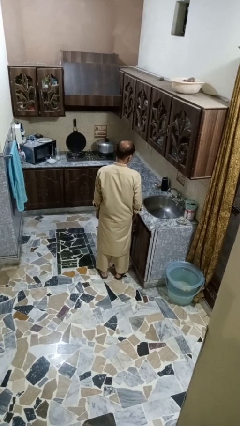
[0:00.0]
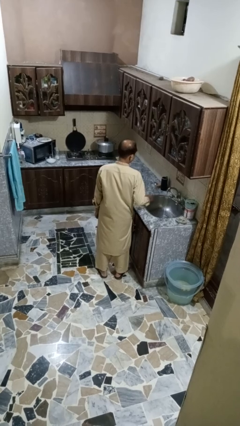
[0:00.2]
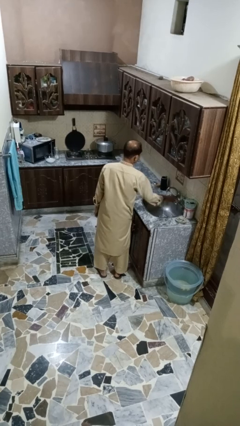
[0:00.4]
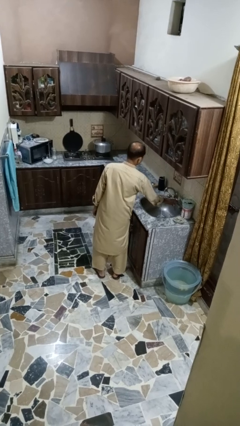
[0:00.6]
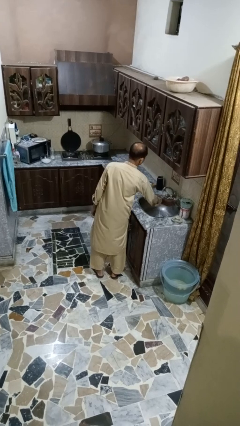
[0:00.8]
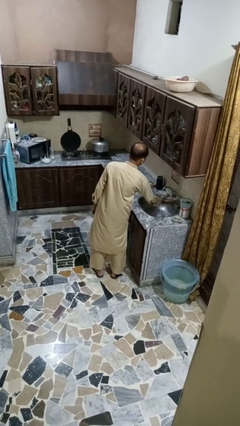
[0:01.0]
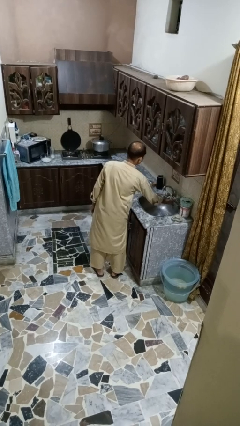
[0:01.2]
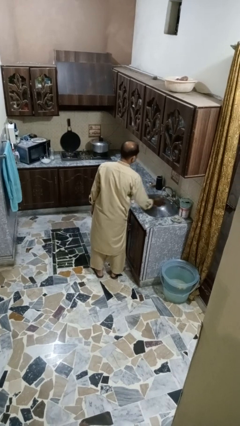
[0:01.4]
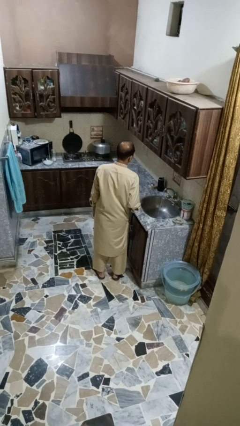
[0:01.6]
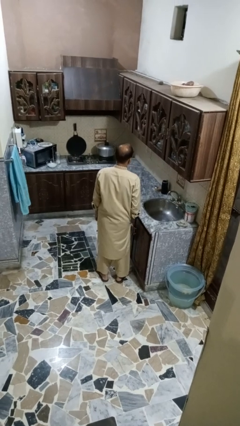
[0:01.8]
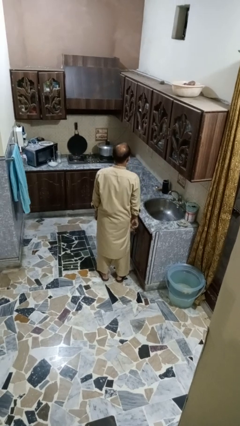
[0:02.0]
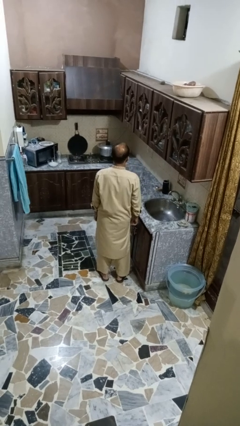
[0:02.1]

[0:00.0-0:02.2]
person turns off faucet

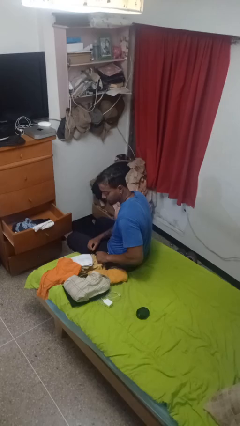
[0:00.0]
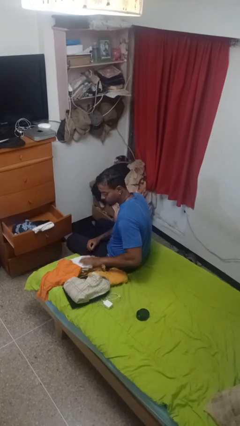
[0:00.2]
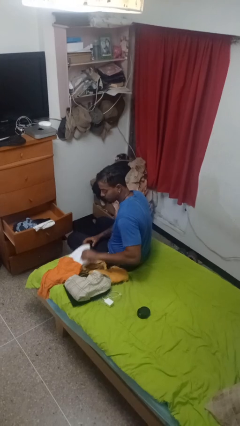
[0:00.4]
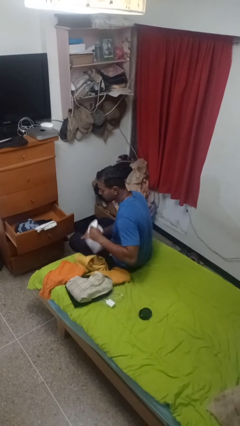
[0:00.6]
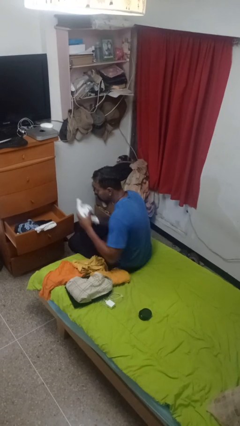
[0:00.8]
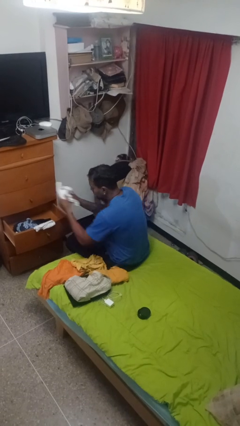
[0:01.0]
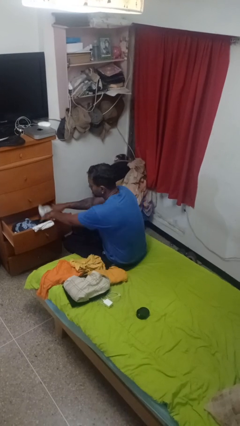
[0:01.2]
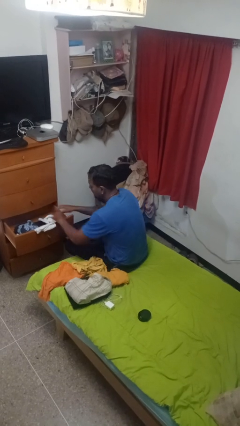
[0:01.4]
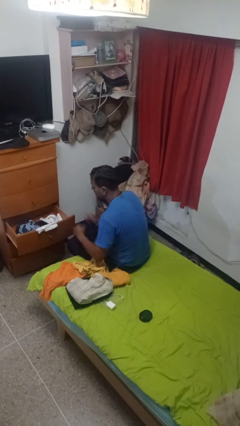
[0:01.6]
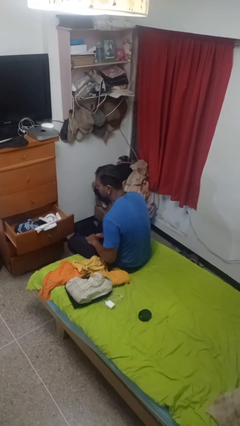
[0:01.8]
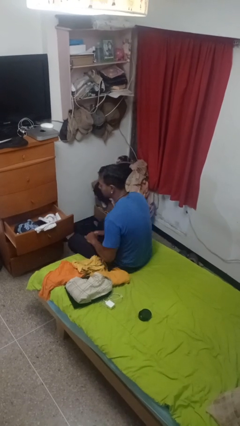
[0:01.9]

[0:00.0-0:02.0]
person puts clothes into dresser

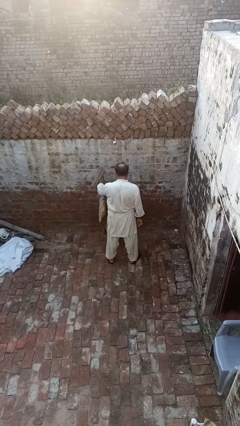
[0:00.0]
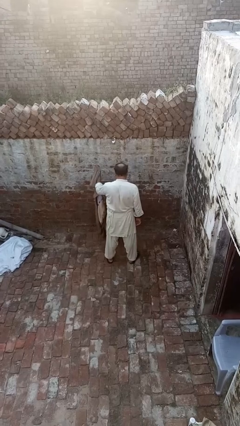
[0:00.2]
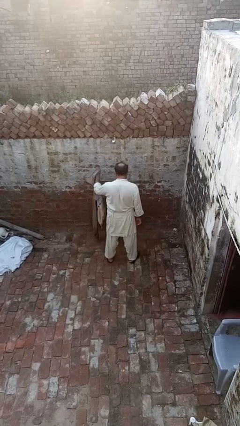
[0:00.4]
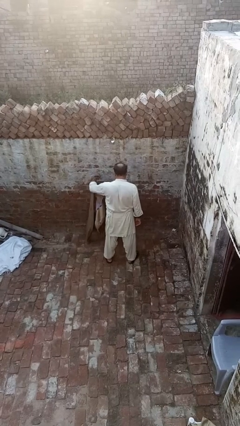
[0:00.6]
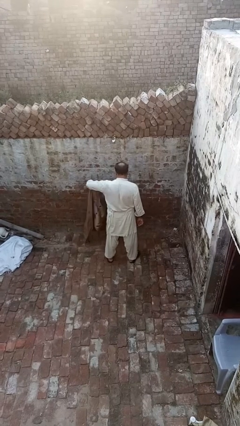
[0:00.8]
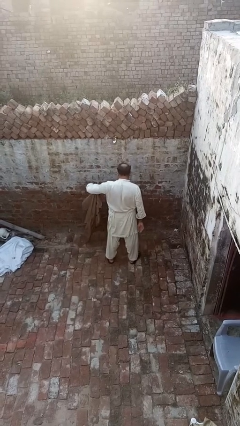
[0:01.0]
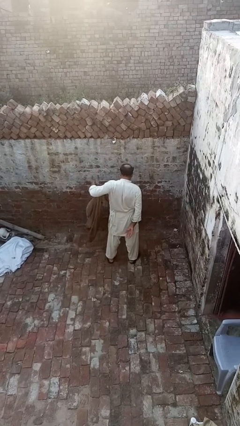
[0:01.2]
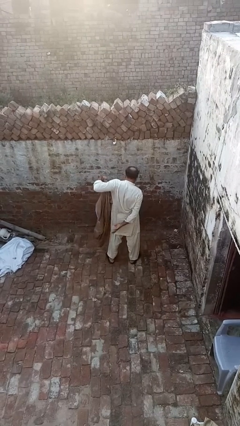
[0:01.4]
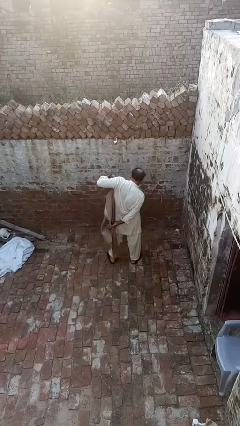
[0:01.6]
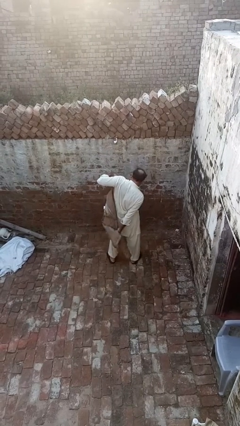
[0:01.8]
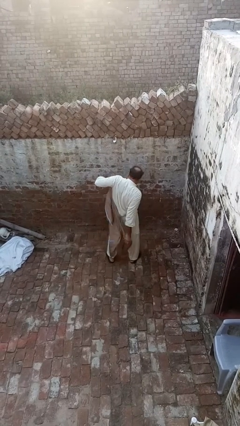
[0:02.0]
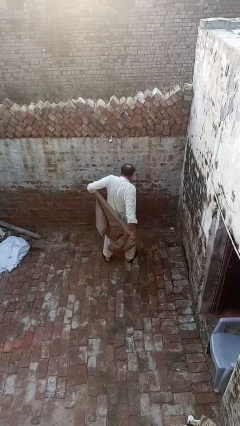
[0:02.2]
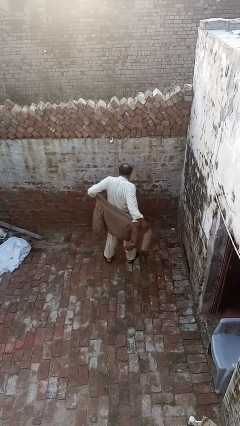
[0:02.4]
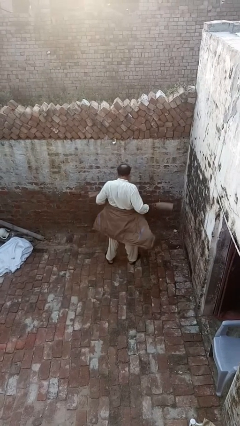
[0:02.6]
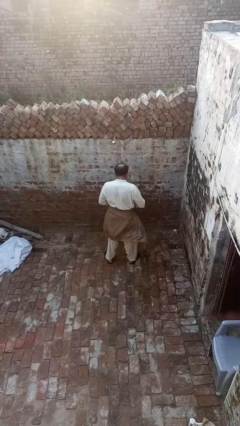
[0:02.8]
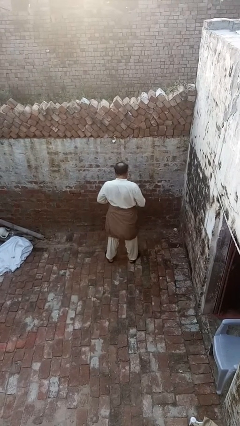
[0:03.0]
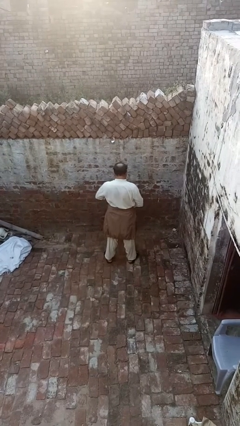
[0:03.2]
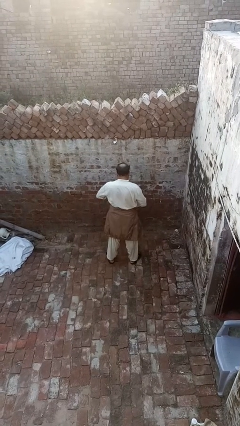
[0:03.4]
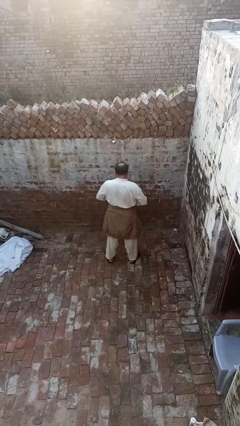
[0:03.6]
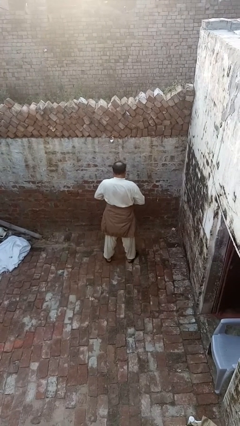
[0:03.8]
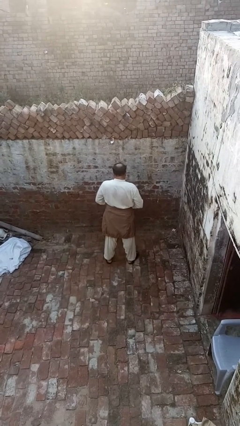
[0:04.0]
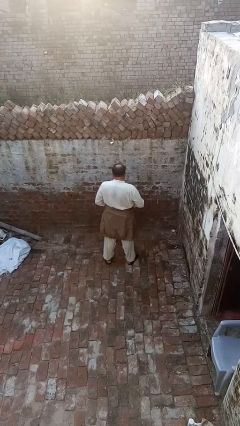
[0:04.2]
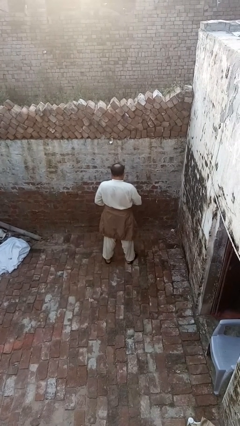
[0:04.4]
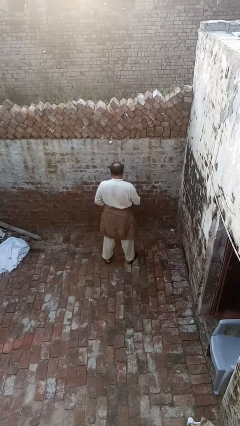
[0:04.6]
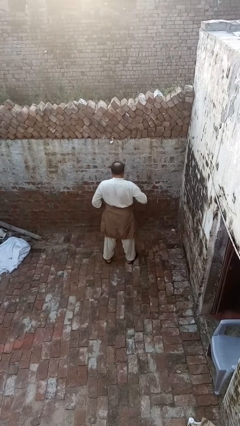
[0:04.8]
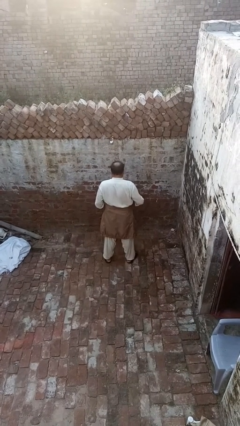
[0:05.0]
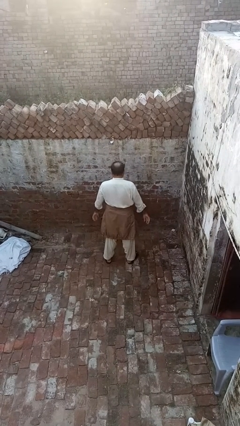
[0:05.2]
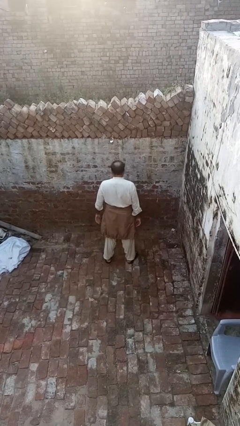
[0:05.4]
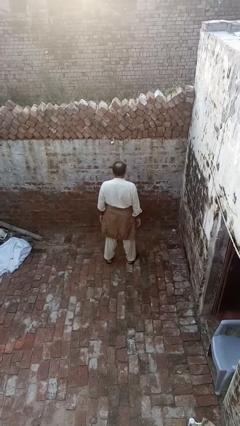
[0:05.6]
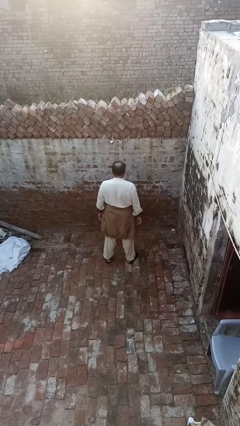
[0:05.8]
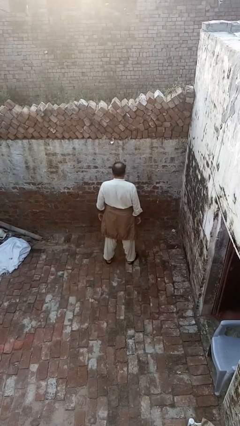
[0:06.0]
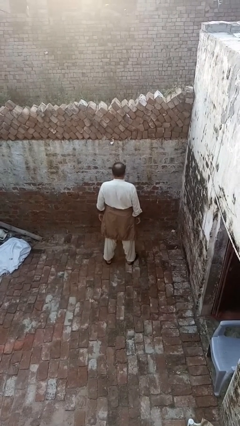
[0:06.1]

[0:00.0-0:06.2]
person ties jacket around waist

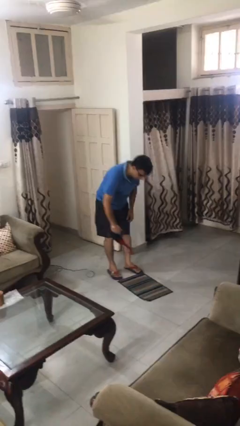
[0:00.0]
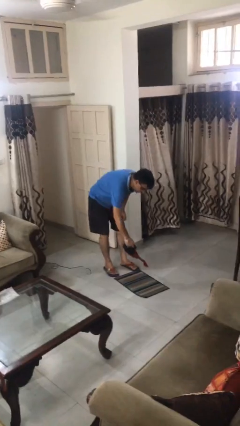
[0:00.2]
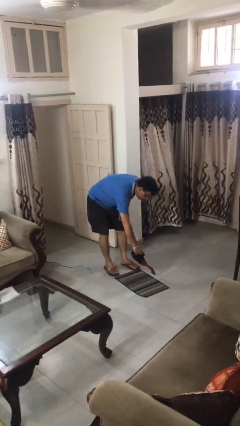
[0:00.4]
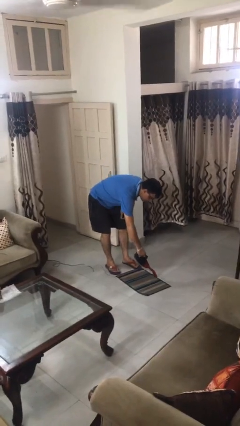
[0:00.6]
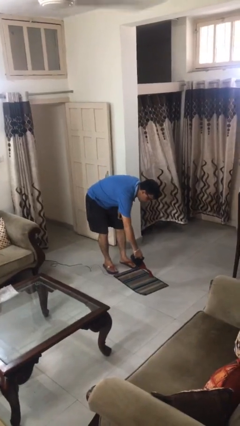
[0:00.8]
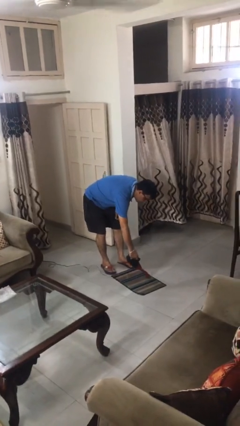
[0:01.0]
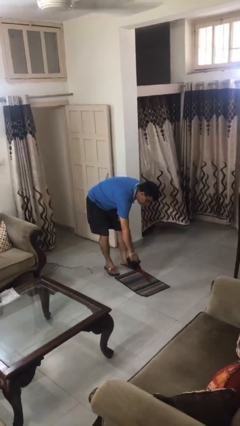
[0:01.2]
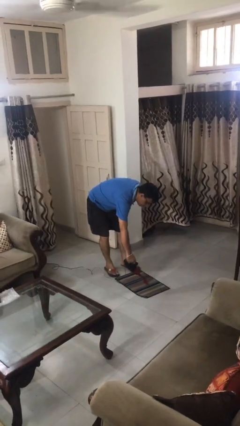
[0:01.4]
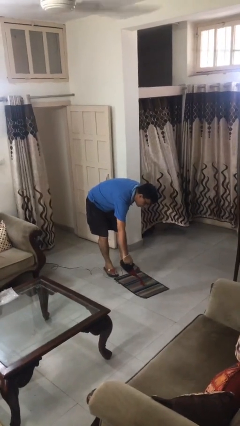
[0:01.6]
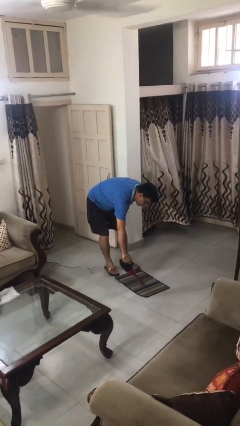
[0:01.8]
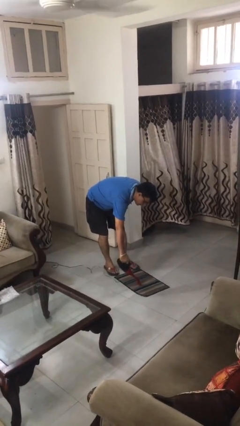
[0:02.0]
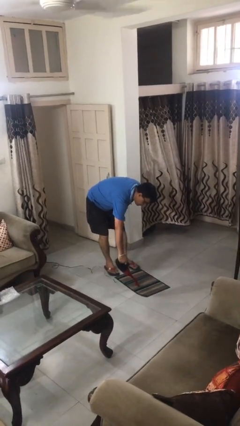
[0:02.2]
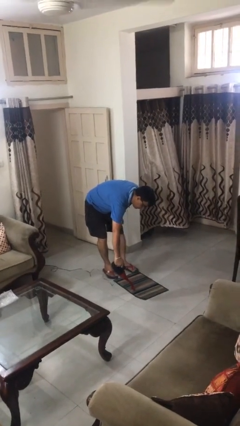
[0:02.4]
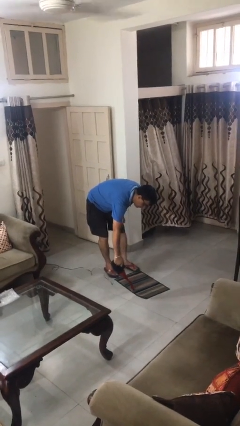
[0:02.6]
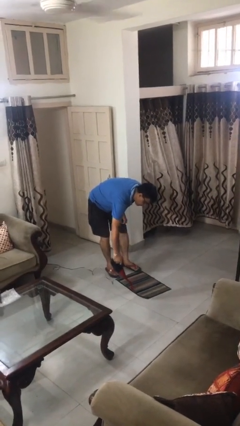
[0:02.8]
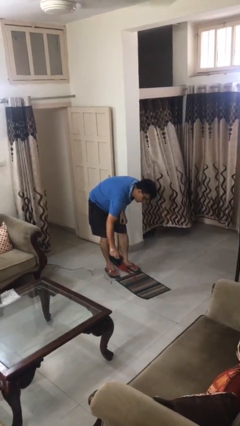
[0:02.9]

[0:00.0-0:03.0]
person vacuums carpet

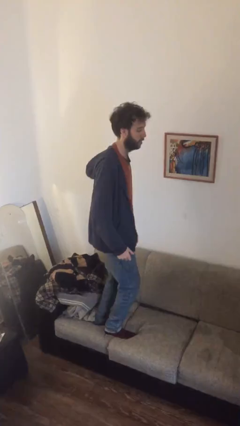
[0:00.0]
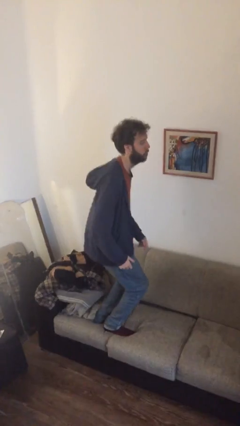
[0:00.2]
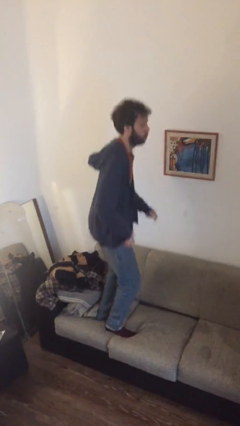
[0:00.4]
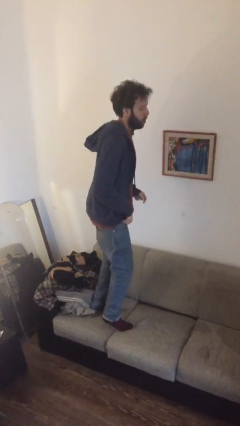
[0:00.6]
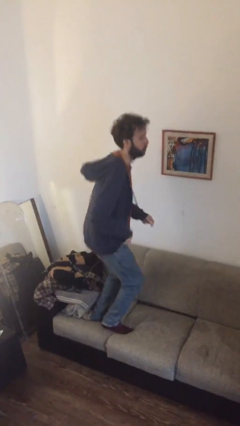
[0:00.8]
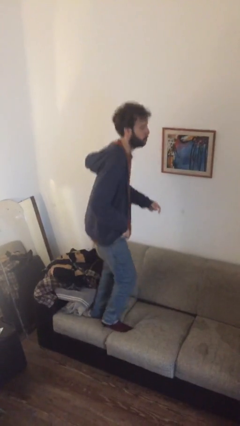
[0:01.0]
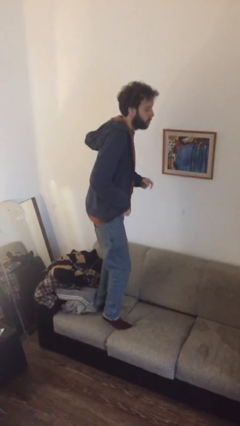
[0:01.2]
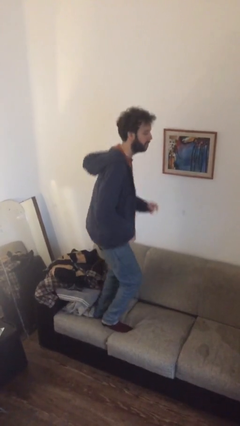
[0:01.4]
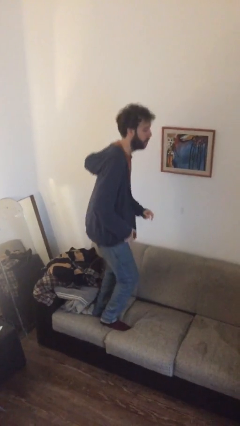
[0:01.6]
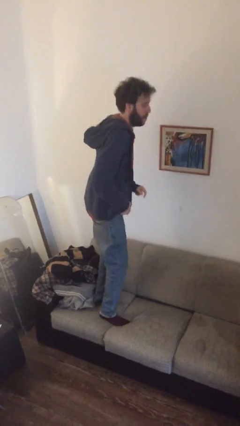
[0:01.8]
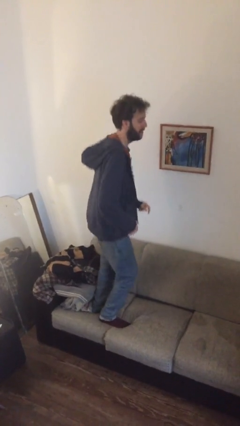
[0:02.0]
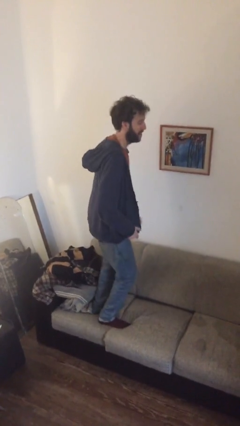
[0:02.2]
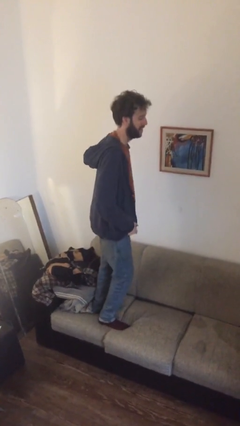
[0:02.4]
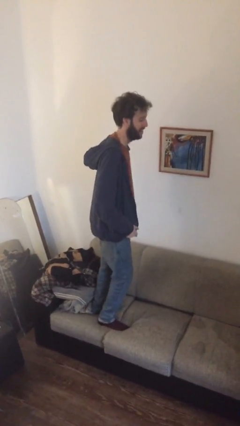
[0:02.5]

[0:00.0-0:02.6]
person jumps on couch

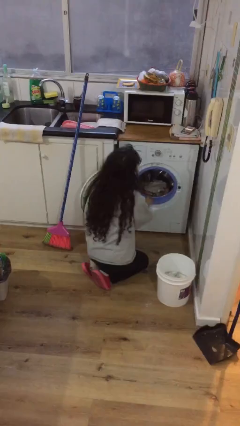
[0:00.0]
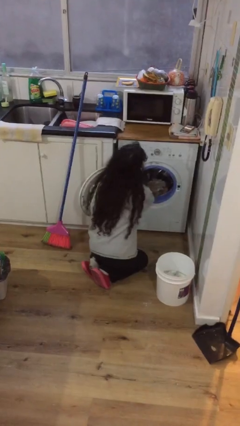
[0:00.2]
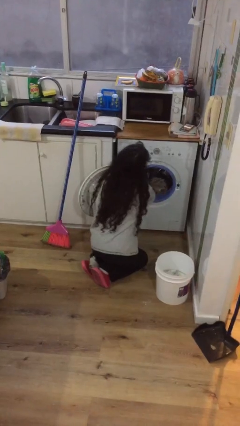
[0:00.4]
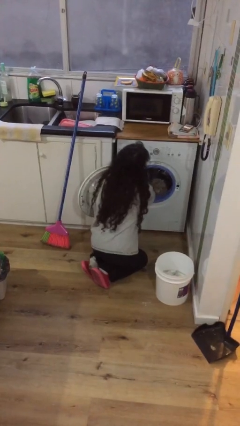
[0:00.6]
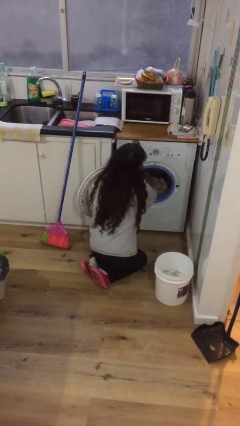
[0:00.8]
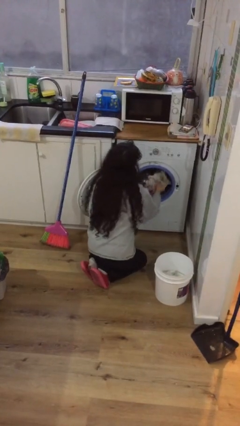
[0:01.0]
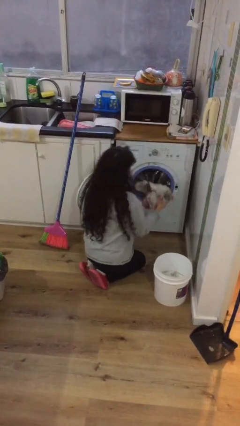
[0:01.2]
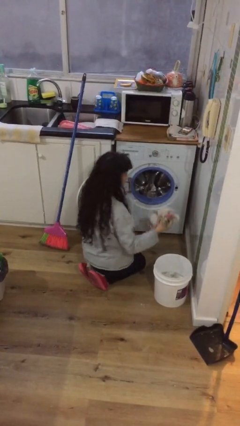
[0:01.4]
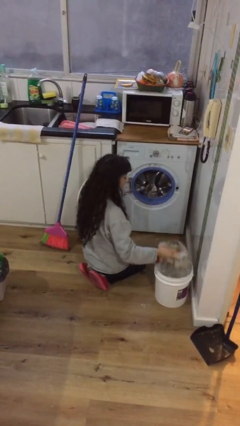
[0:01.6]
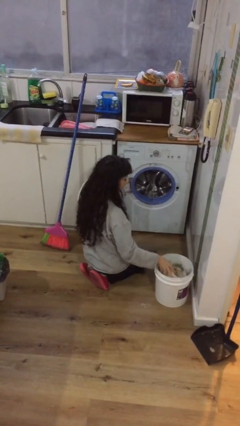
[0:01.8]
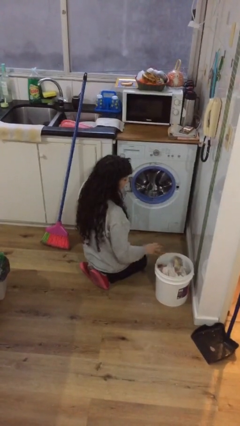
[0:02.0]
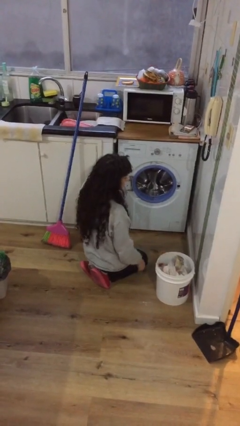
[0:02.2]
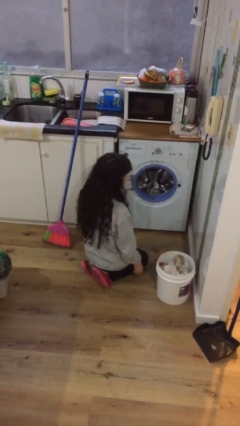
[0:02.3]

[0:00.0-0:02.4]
person unloads dryer
